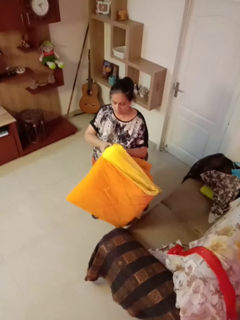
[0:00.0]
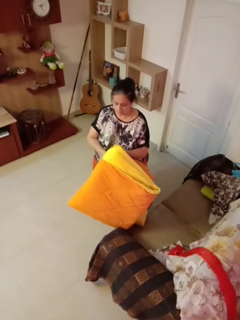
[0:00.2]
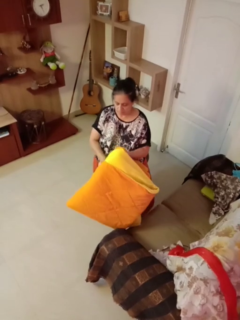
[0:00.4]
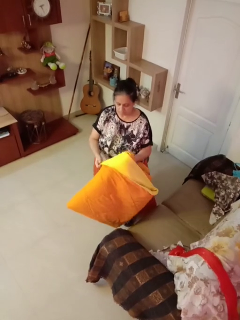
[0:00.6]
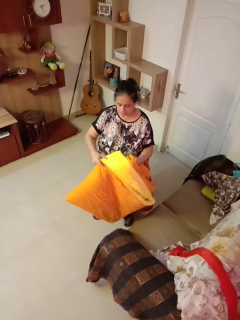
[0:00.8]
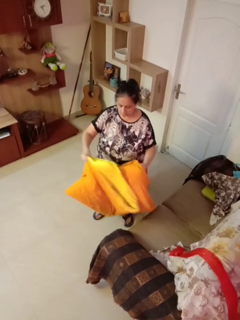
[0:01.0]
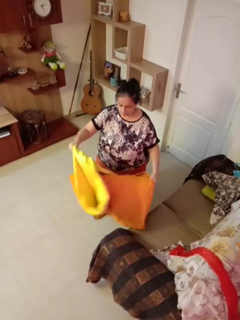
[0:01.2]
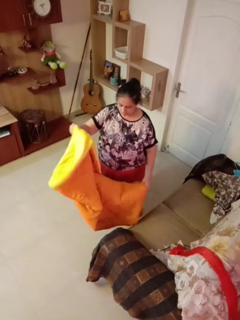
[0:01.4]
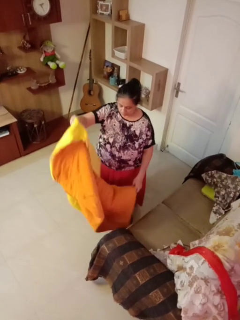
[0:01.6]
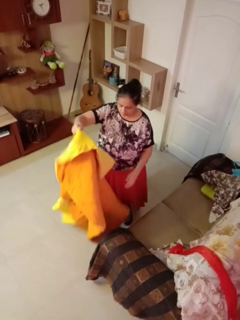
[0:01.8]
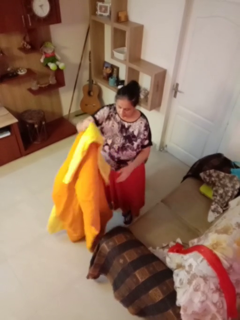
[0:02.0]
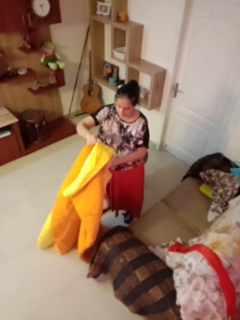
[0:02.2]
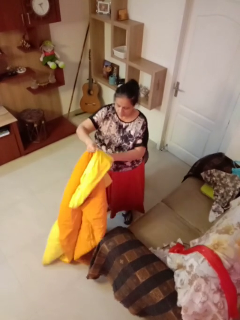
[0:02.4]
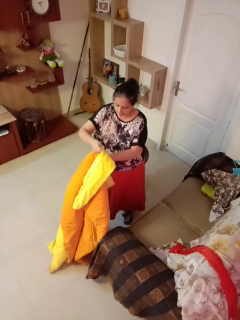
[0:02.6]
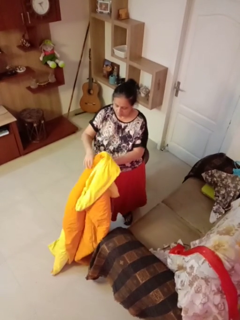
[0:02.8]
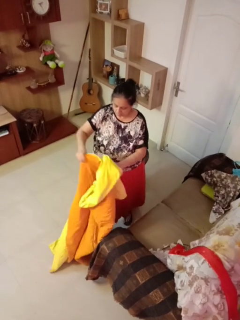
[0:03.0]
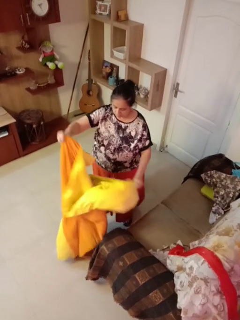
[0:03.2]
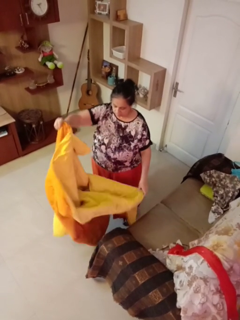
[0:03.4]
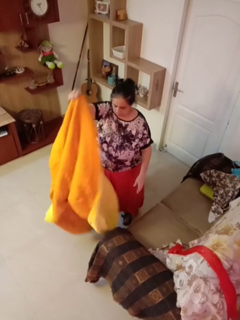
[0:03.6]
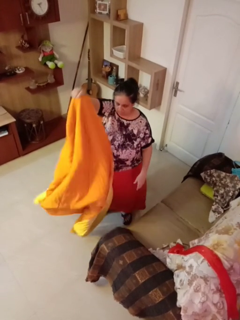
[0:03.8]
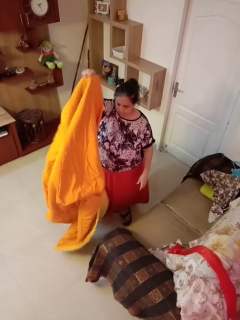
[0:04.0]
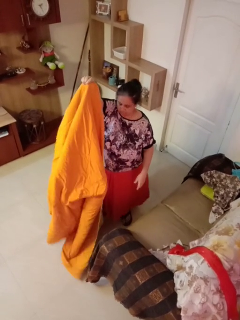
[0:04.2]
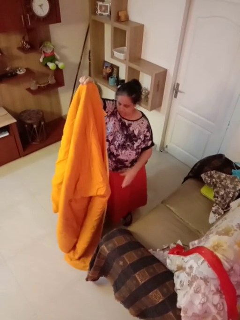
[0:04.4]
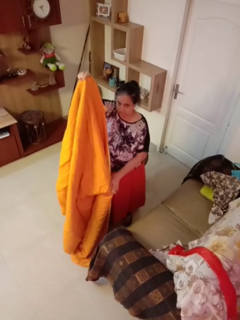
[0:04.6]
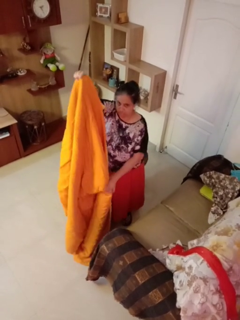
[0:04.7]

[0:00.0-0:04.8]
person unfolds blanket

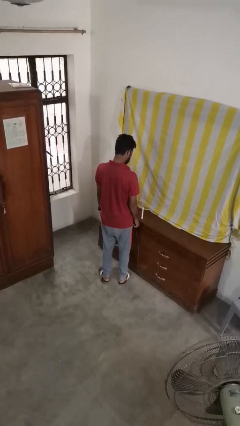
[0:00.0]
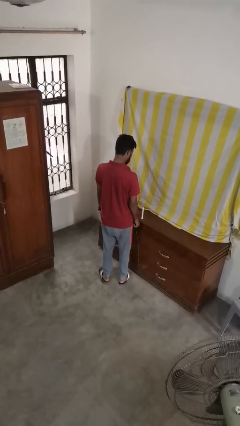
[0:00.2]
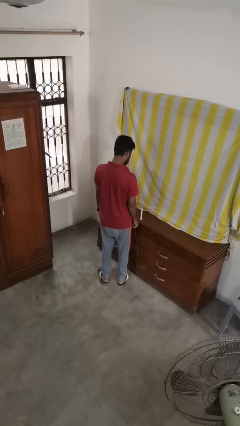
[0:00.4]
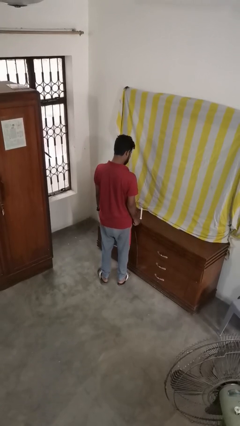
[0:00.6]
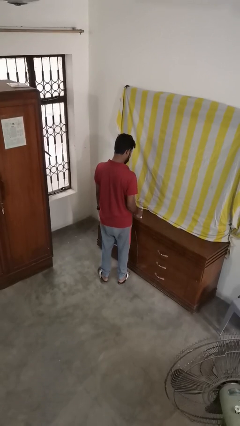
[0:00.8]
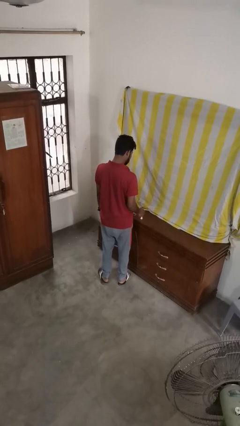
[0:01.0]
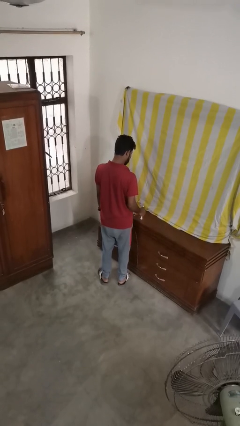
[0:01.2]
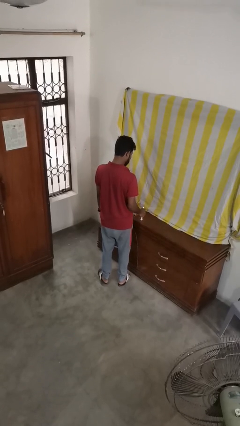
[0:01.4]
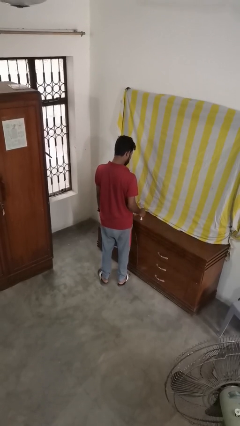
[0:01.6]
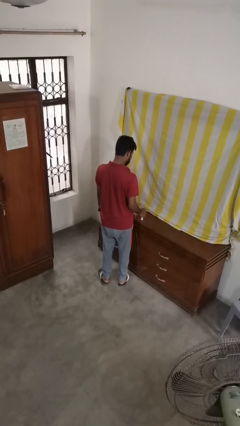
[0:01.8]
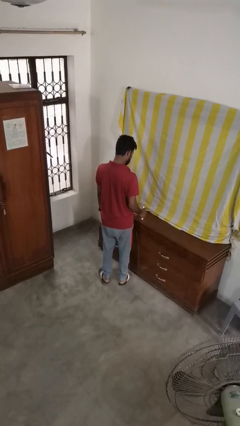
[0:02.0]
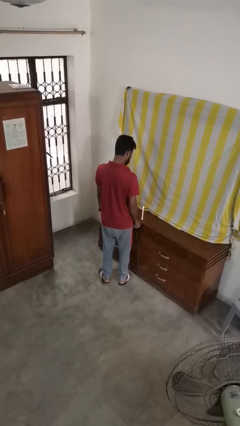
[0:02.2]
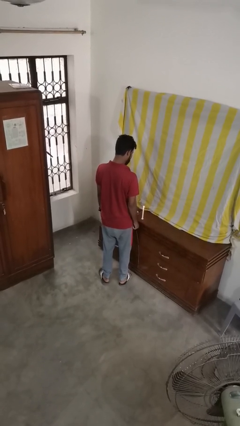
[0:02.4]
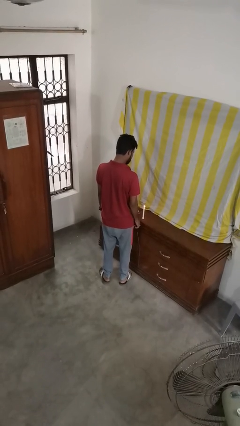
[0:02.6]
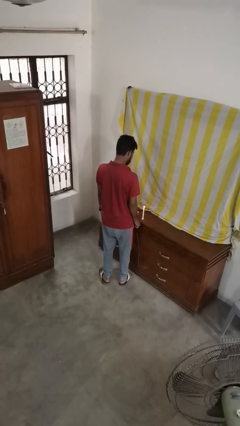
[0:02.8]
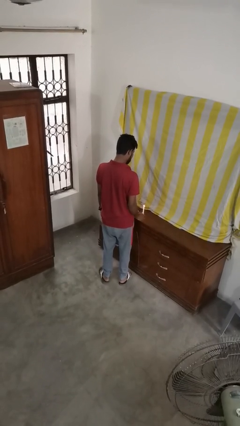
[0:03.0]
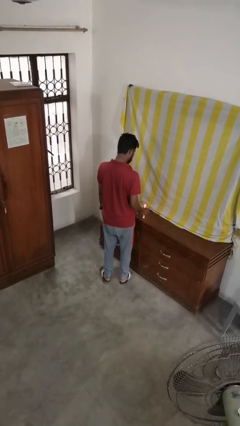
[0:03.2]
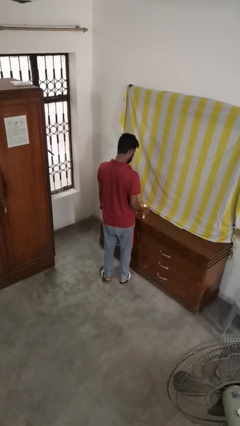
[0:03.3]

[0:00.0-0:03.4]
person lights candle

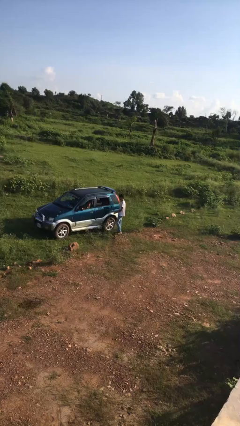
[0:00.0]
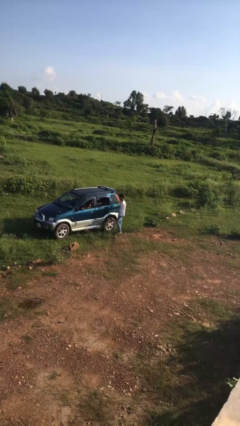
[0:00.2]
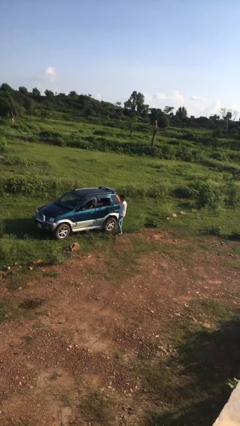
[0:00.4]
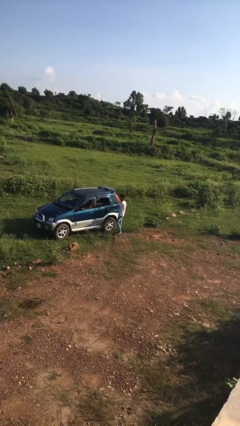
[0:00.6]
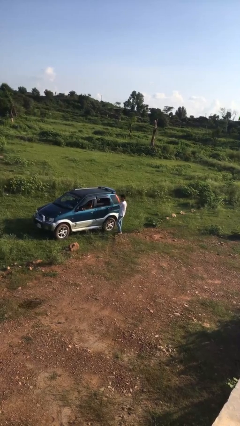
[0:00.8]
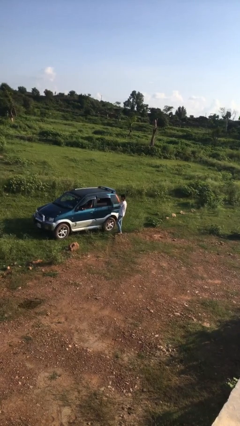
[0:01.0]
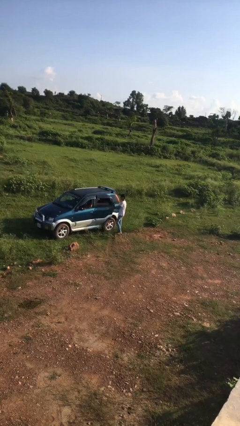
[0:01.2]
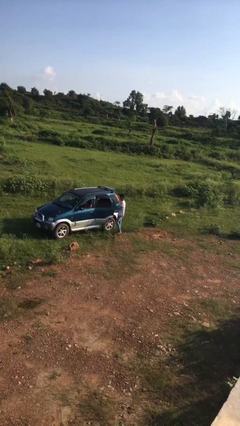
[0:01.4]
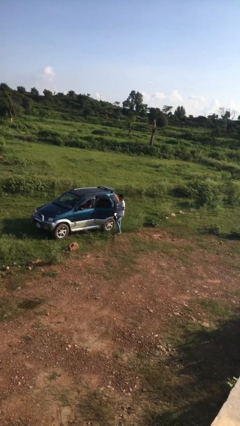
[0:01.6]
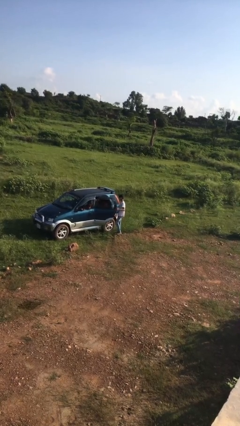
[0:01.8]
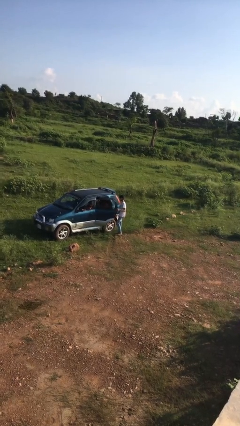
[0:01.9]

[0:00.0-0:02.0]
person opens car door

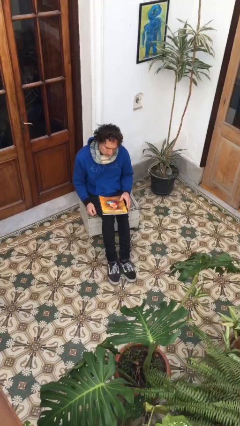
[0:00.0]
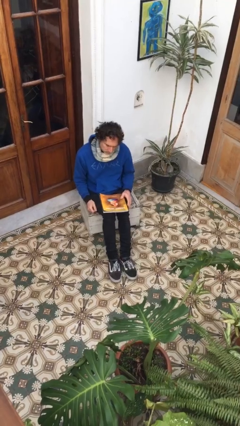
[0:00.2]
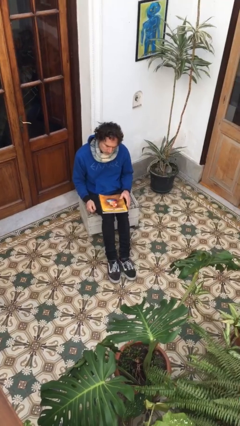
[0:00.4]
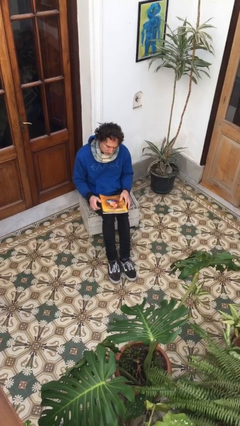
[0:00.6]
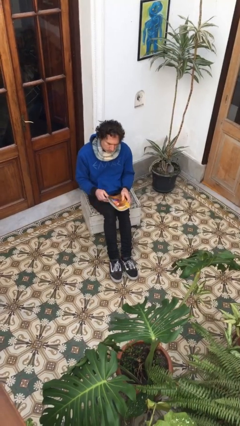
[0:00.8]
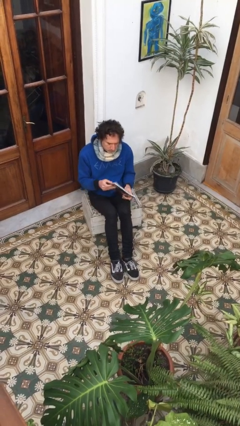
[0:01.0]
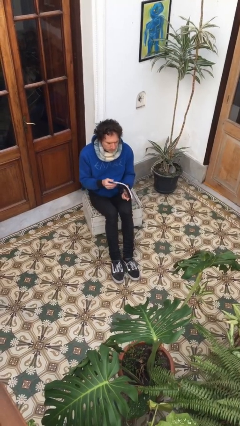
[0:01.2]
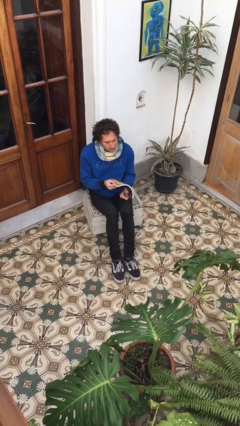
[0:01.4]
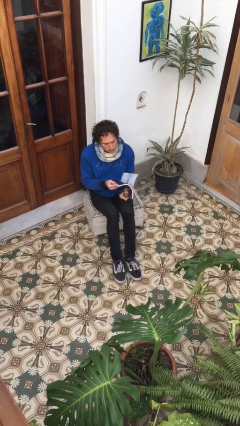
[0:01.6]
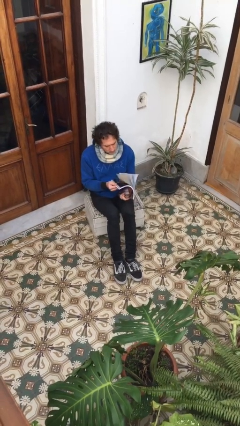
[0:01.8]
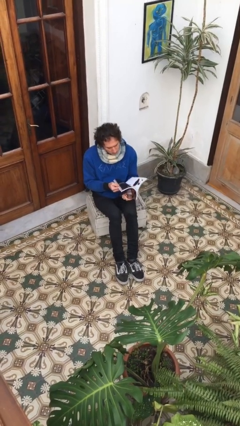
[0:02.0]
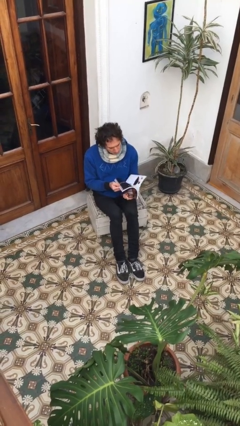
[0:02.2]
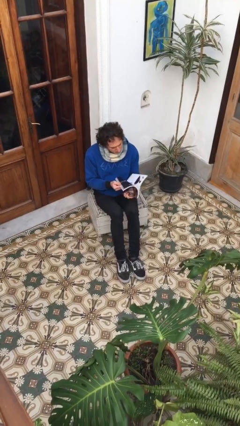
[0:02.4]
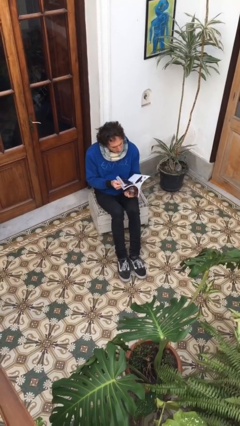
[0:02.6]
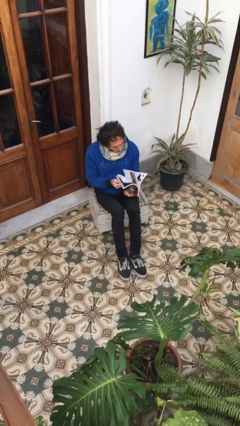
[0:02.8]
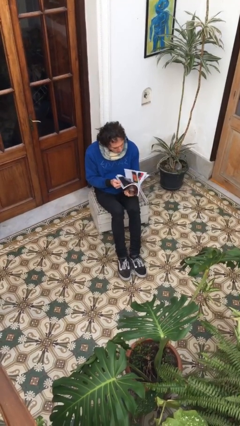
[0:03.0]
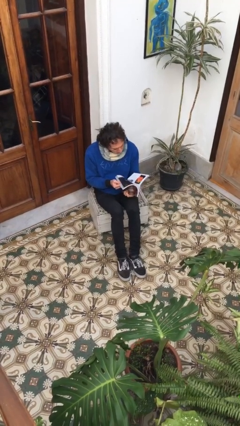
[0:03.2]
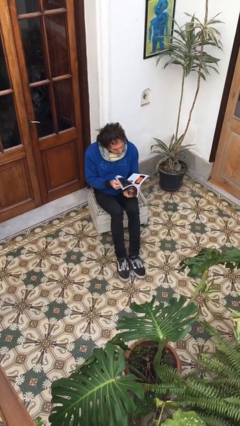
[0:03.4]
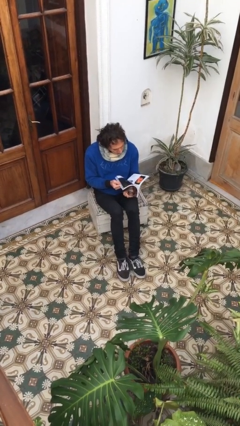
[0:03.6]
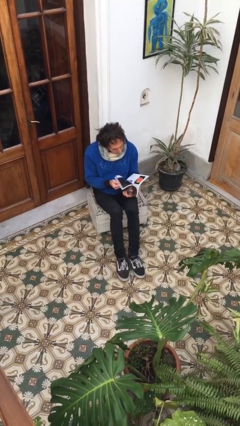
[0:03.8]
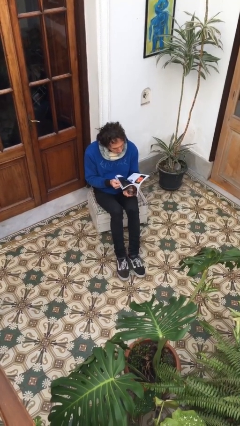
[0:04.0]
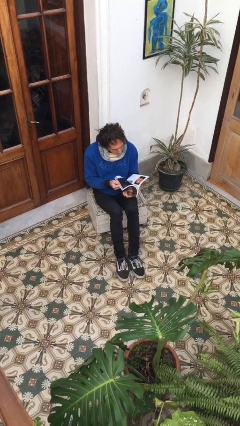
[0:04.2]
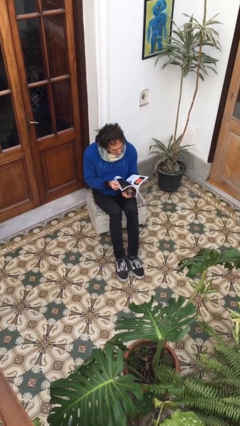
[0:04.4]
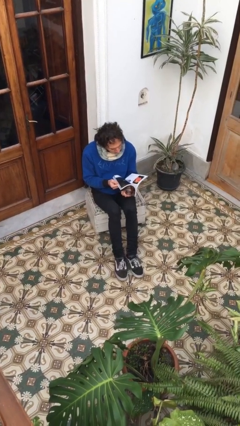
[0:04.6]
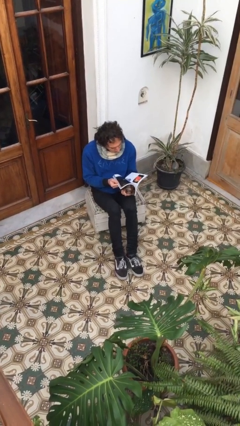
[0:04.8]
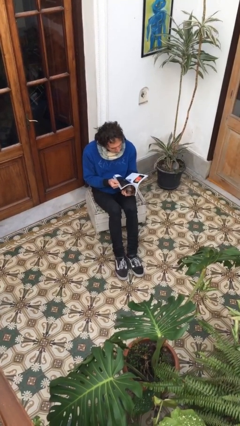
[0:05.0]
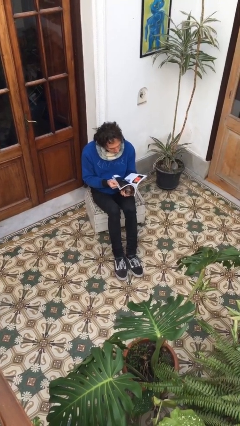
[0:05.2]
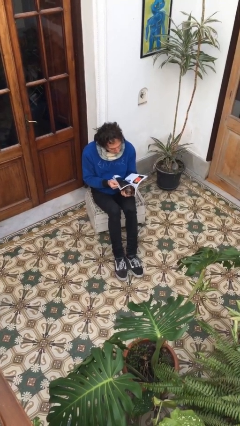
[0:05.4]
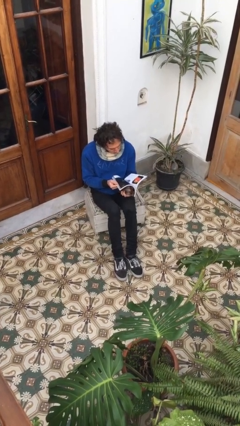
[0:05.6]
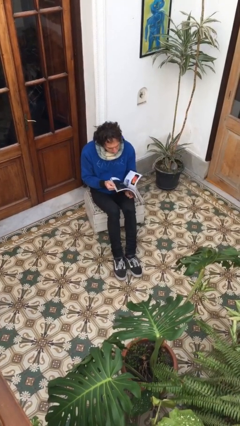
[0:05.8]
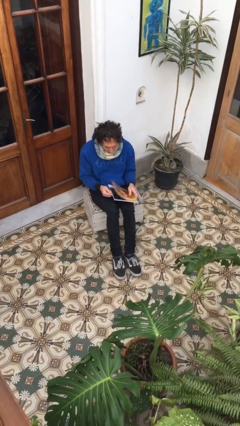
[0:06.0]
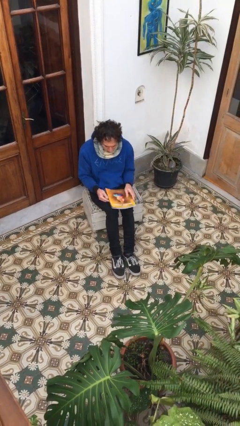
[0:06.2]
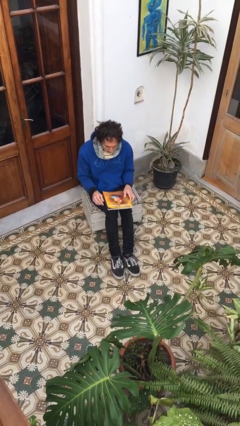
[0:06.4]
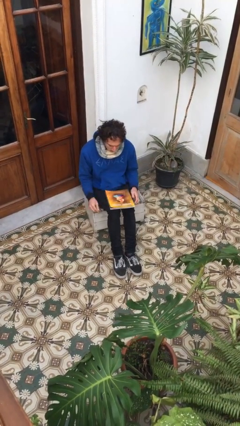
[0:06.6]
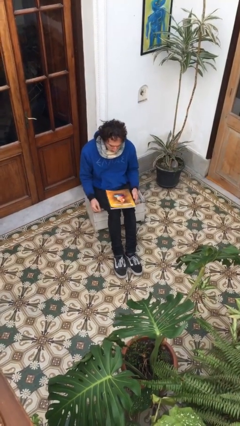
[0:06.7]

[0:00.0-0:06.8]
person reads magazine

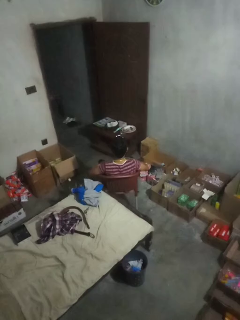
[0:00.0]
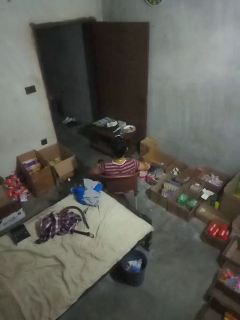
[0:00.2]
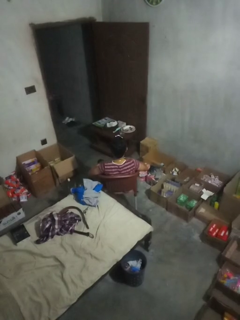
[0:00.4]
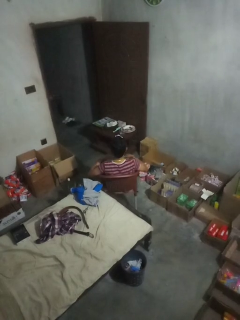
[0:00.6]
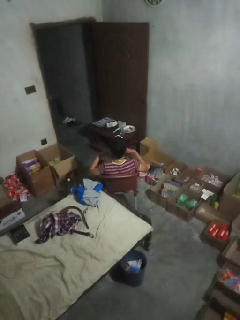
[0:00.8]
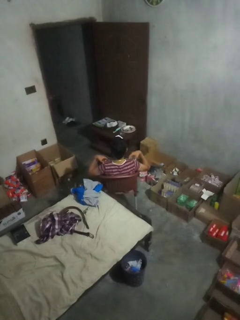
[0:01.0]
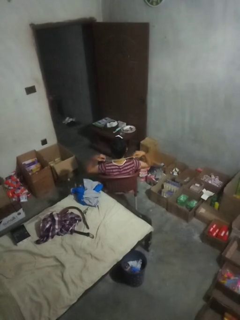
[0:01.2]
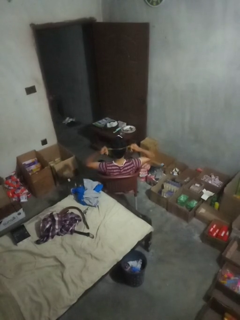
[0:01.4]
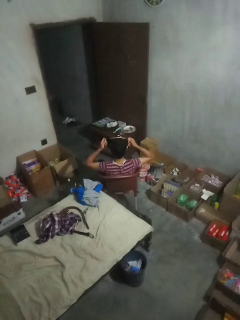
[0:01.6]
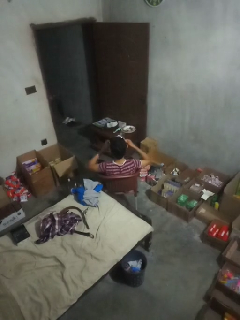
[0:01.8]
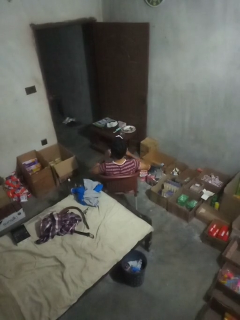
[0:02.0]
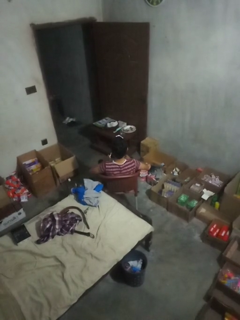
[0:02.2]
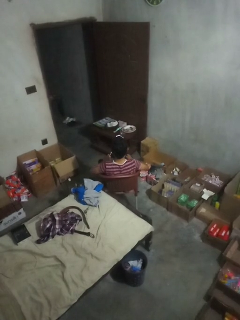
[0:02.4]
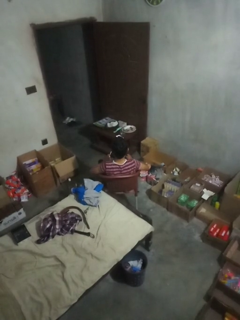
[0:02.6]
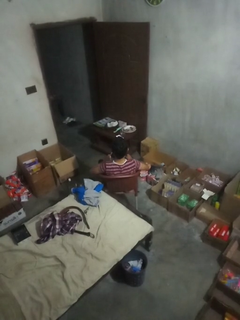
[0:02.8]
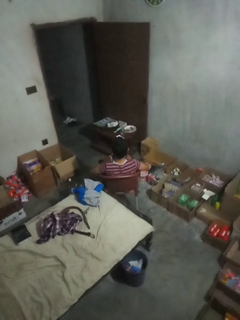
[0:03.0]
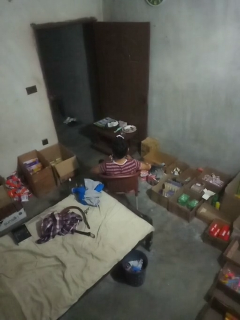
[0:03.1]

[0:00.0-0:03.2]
person takes off necklace
